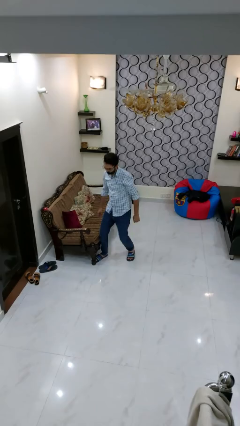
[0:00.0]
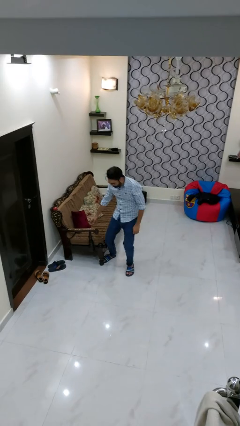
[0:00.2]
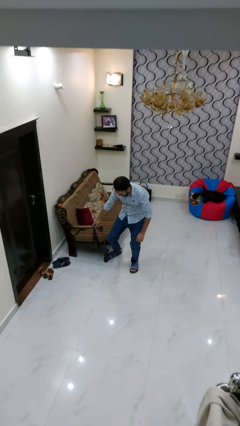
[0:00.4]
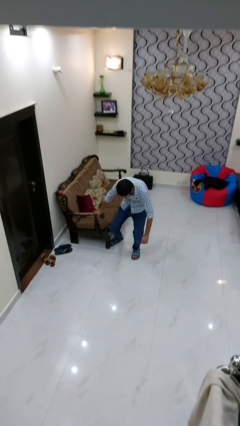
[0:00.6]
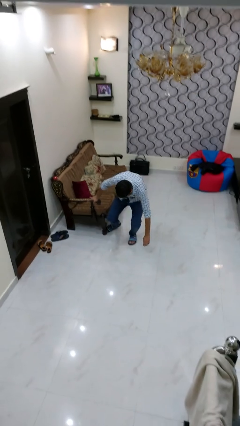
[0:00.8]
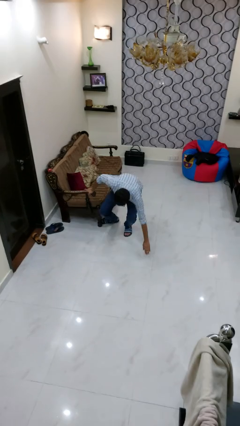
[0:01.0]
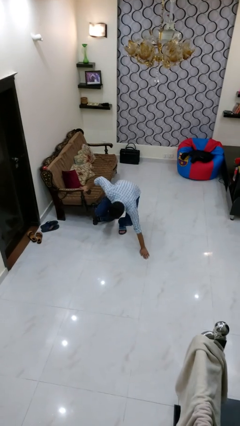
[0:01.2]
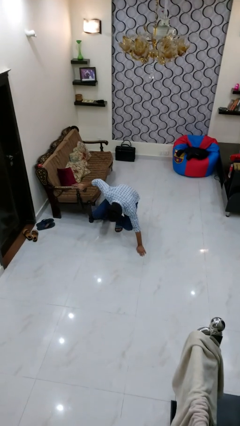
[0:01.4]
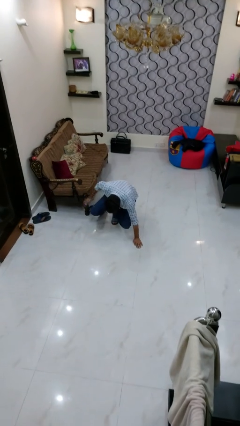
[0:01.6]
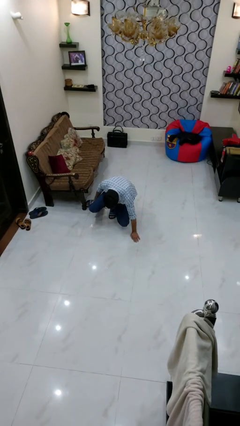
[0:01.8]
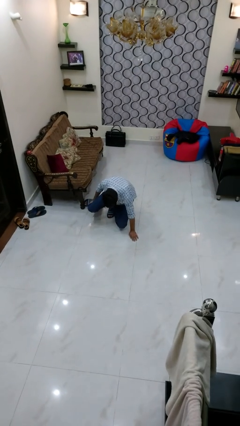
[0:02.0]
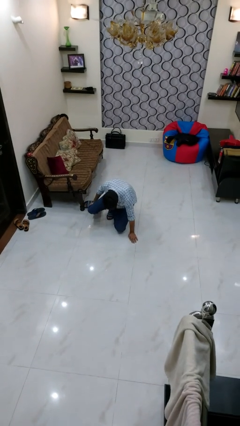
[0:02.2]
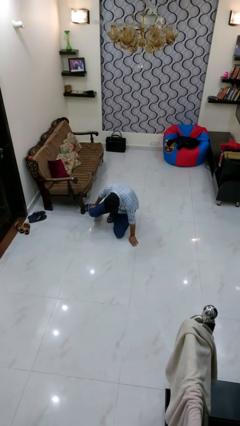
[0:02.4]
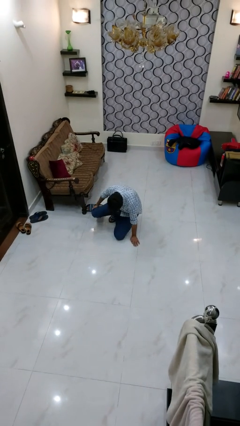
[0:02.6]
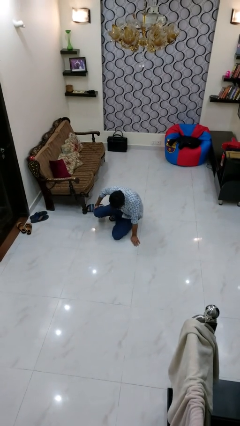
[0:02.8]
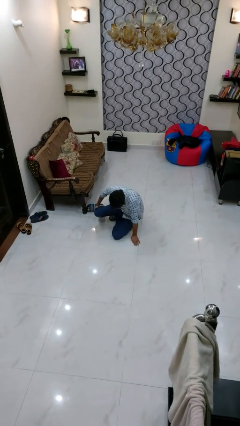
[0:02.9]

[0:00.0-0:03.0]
person trips on object on floor

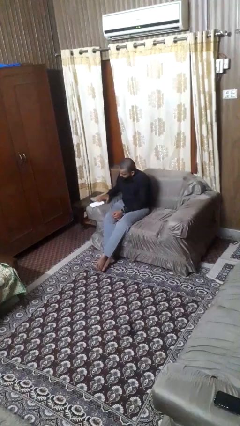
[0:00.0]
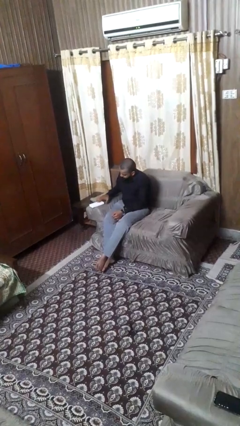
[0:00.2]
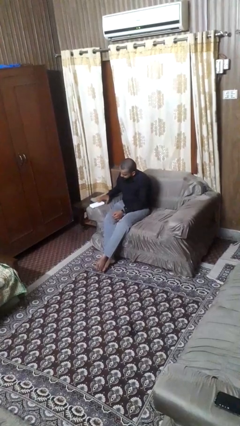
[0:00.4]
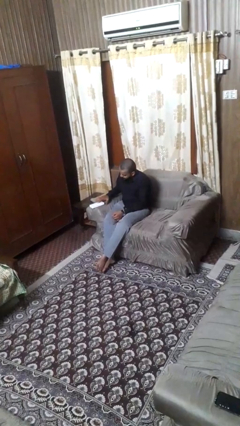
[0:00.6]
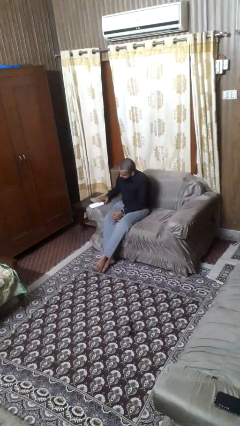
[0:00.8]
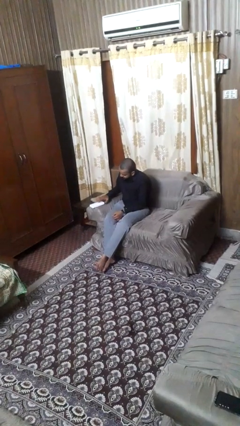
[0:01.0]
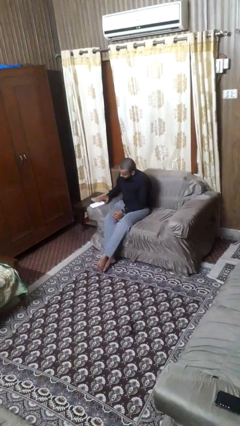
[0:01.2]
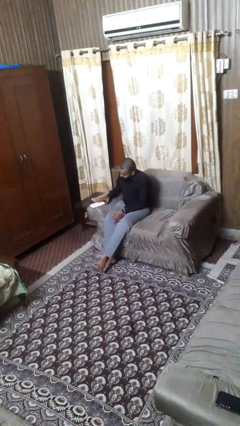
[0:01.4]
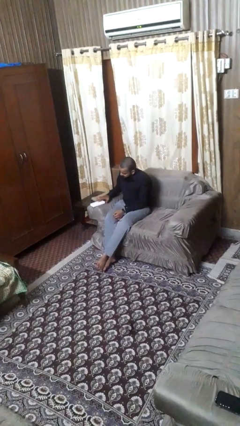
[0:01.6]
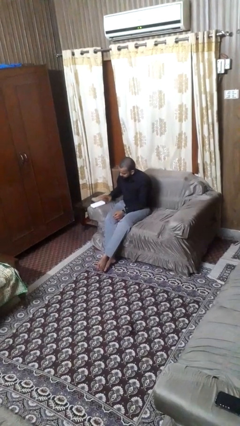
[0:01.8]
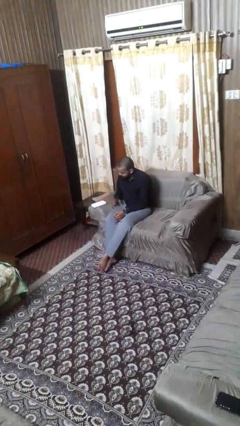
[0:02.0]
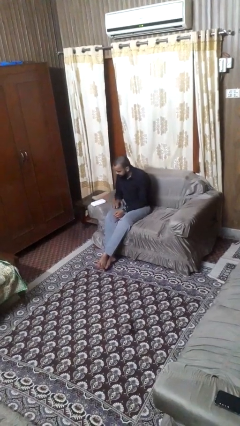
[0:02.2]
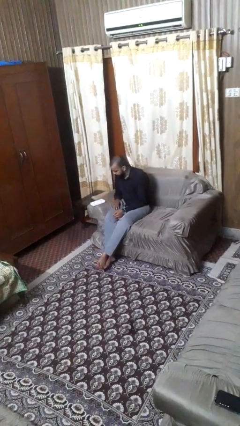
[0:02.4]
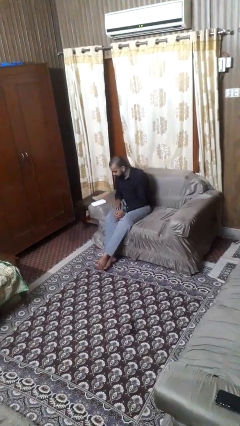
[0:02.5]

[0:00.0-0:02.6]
person taps object with finger

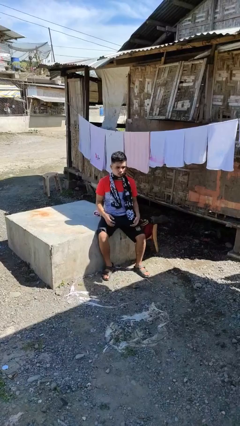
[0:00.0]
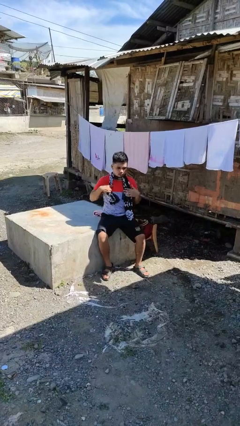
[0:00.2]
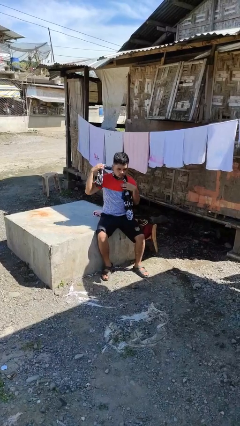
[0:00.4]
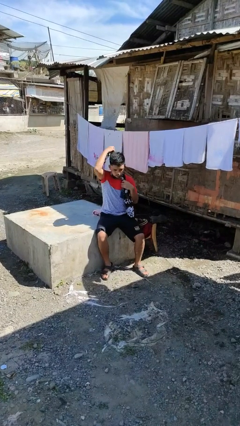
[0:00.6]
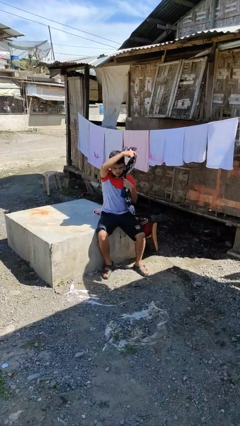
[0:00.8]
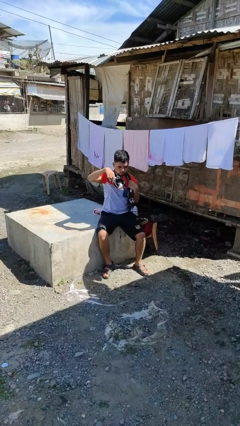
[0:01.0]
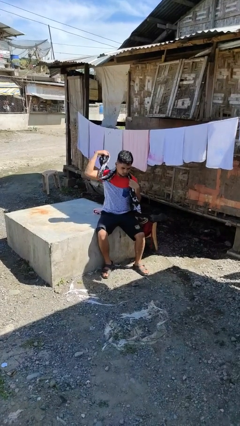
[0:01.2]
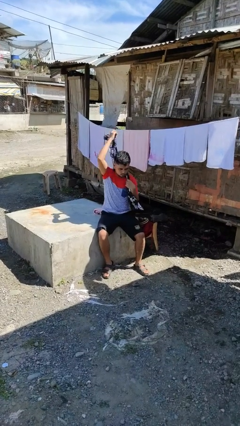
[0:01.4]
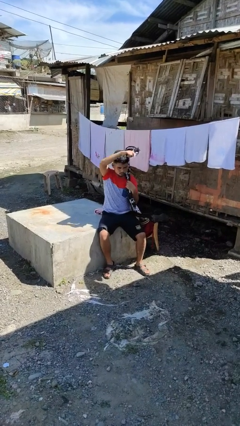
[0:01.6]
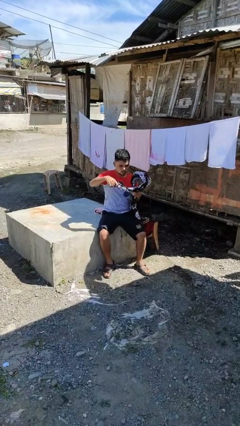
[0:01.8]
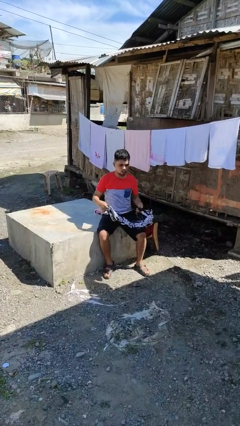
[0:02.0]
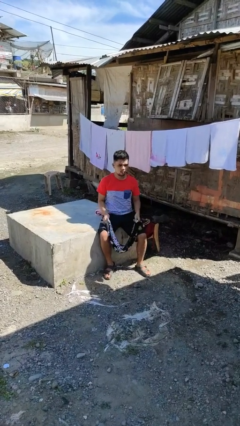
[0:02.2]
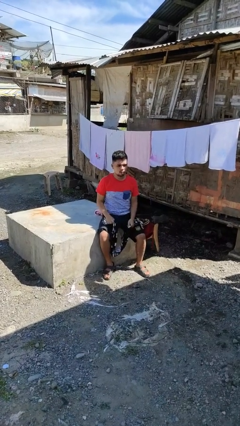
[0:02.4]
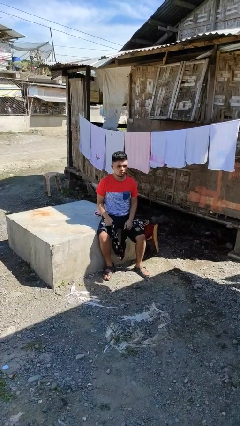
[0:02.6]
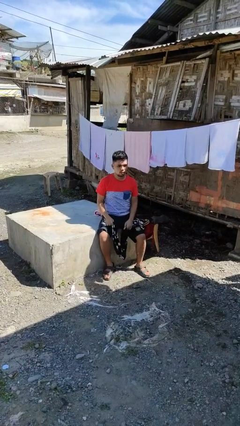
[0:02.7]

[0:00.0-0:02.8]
person takes off scarf

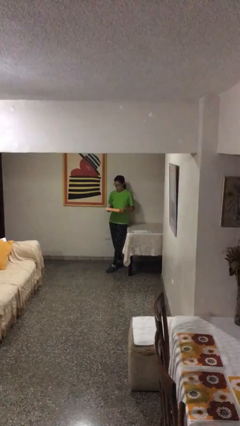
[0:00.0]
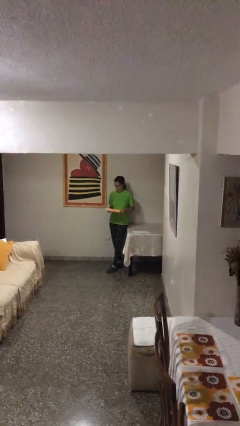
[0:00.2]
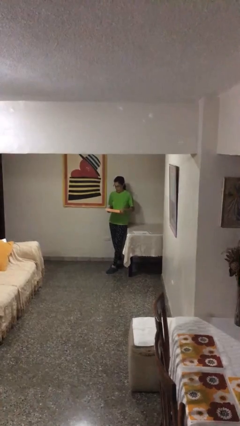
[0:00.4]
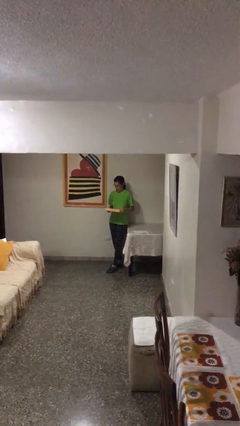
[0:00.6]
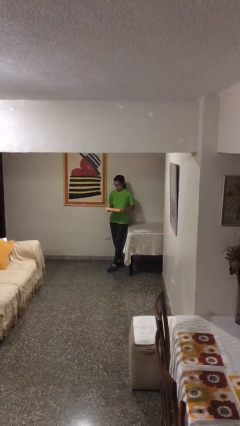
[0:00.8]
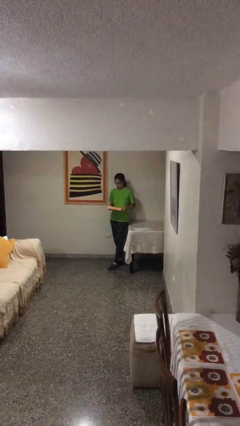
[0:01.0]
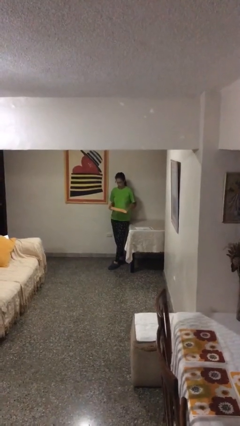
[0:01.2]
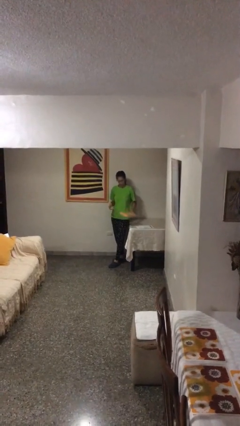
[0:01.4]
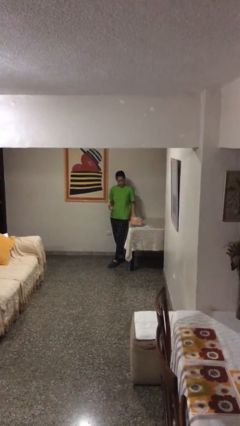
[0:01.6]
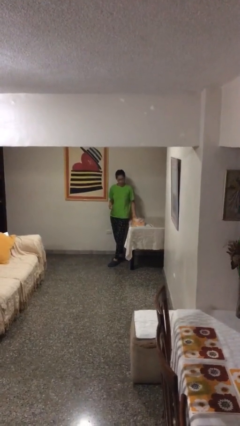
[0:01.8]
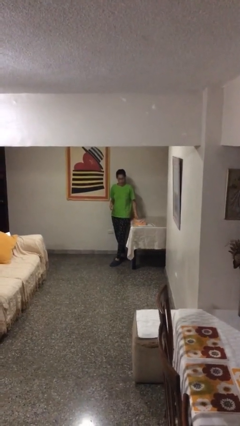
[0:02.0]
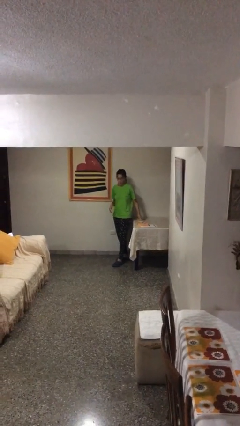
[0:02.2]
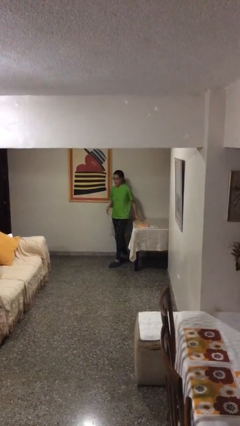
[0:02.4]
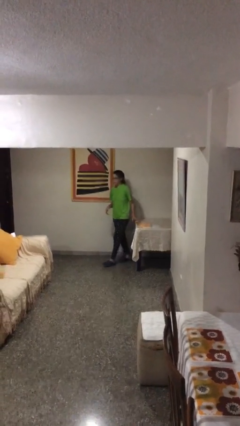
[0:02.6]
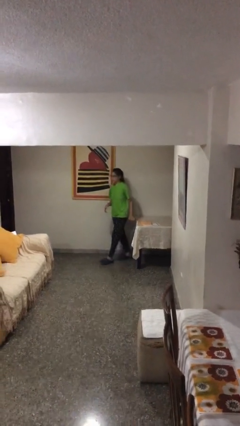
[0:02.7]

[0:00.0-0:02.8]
person puts down object on table

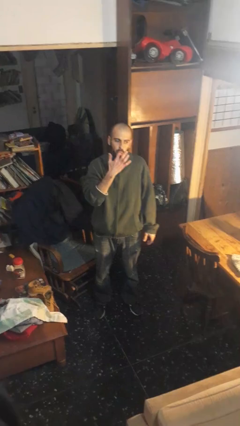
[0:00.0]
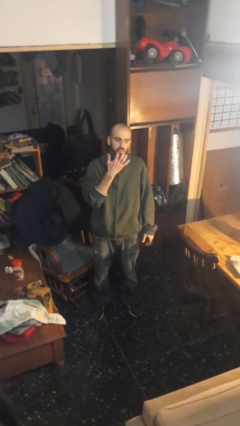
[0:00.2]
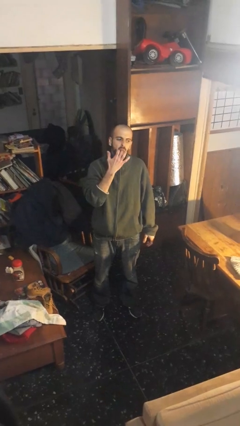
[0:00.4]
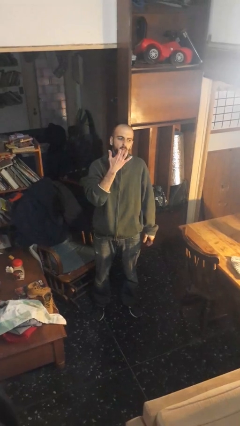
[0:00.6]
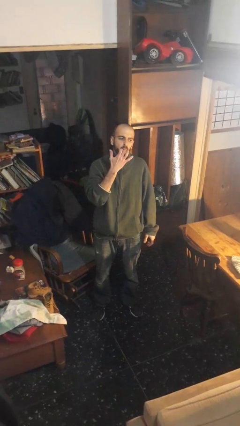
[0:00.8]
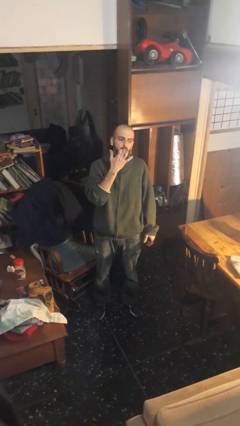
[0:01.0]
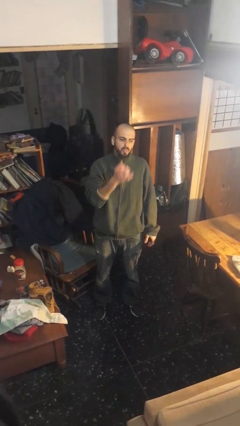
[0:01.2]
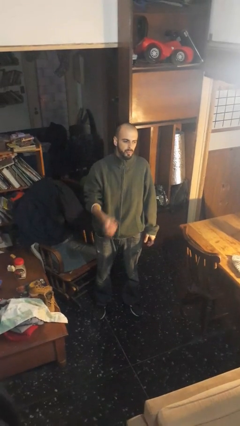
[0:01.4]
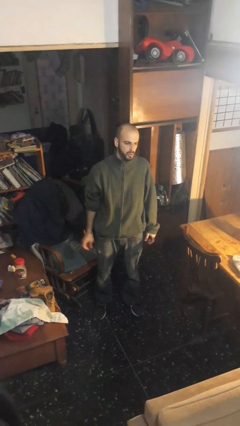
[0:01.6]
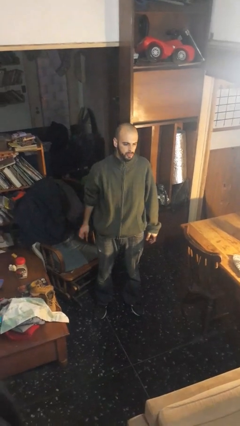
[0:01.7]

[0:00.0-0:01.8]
person licks fingers

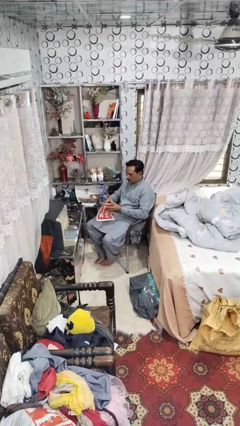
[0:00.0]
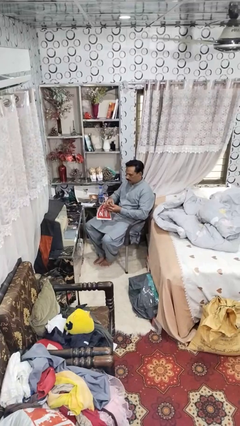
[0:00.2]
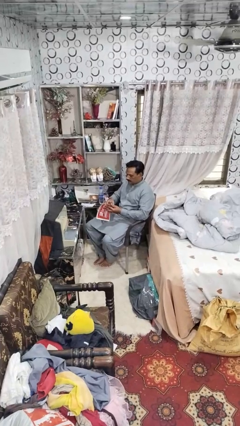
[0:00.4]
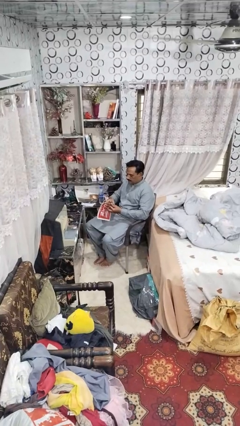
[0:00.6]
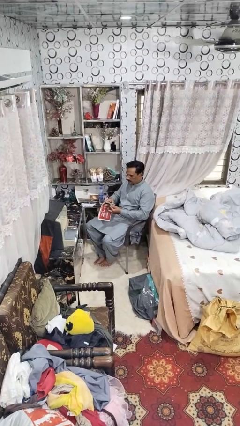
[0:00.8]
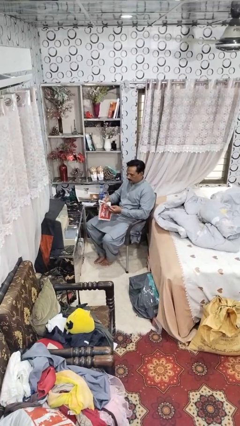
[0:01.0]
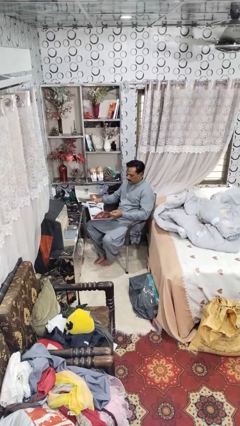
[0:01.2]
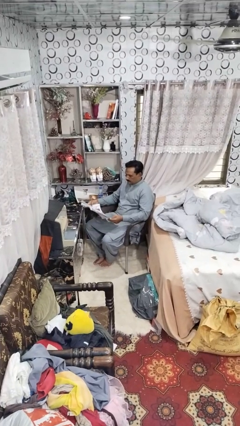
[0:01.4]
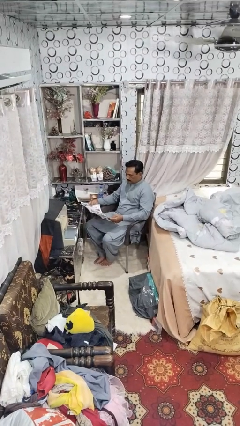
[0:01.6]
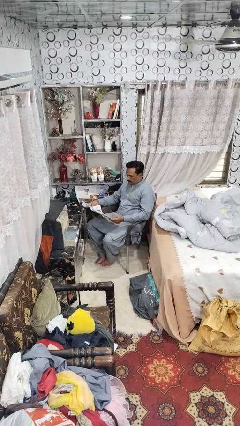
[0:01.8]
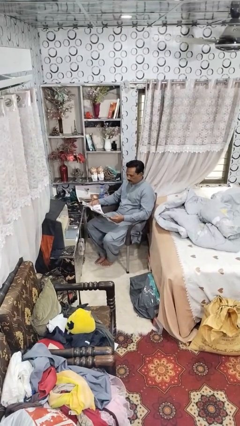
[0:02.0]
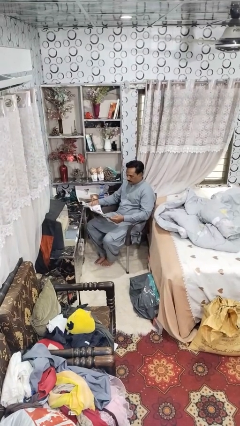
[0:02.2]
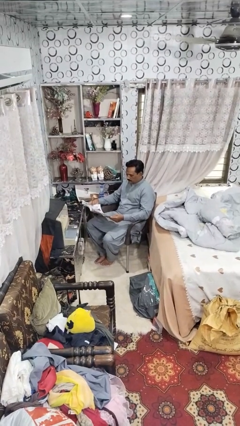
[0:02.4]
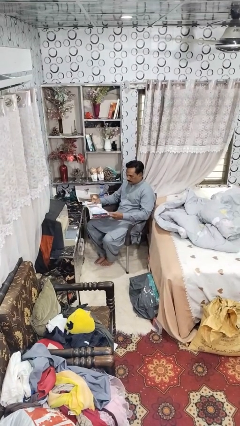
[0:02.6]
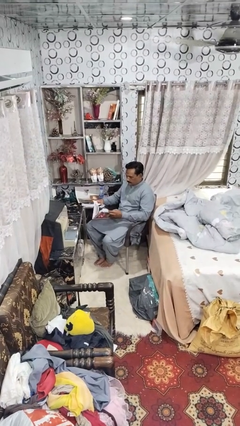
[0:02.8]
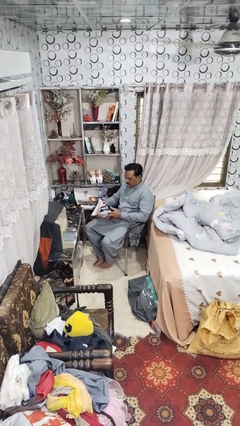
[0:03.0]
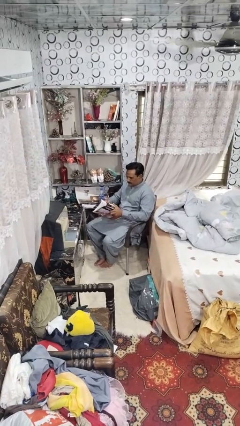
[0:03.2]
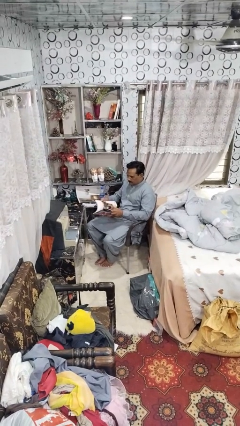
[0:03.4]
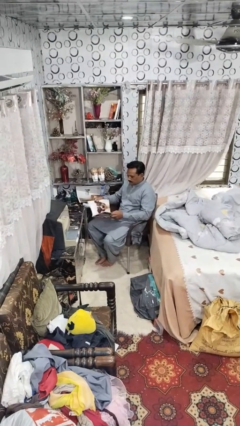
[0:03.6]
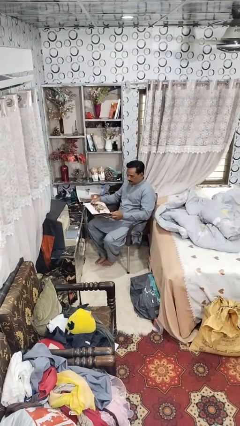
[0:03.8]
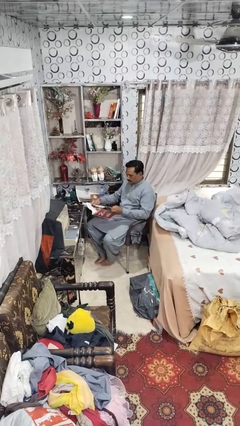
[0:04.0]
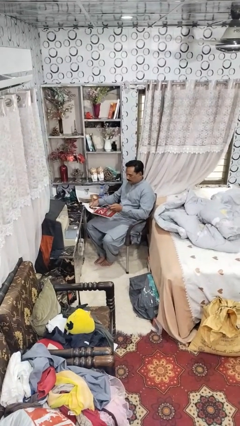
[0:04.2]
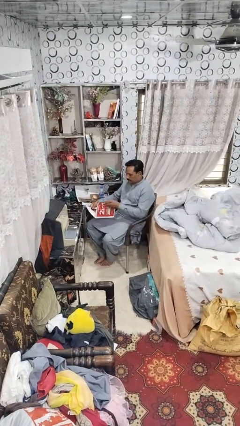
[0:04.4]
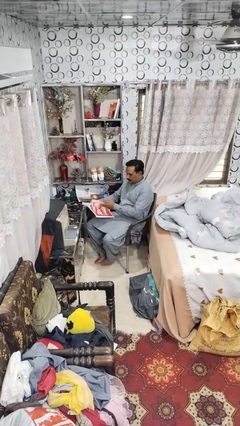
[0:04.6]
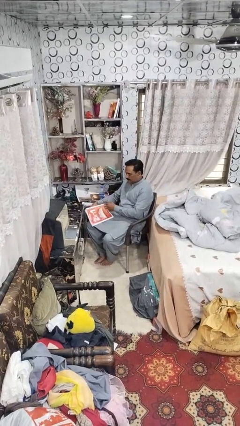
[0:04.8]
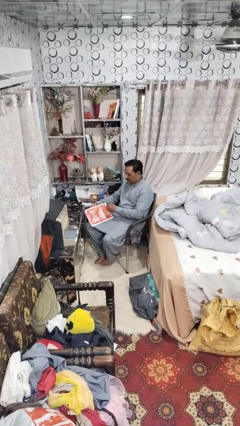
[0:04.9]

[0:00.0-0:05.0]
person reads magazine
